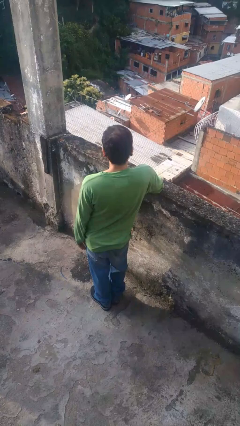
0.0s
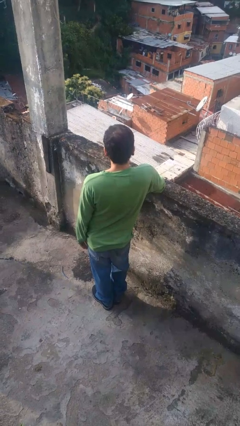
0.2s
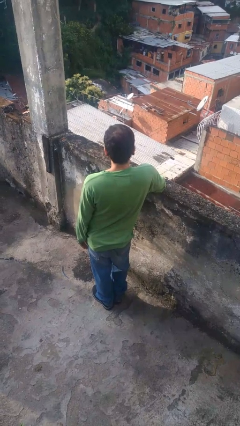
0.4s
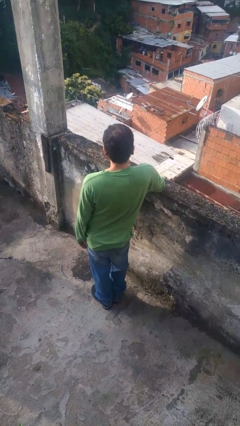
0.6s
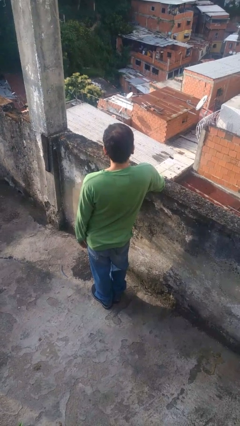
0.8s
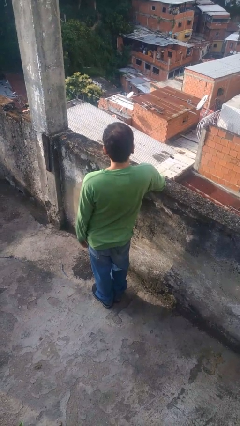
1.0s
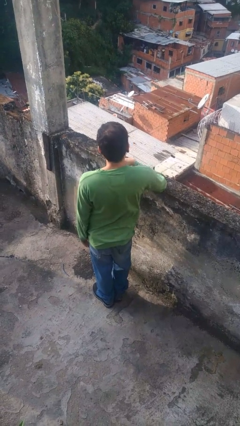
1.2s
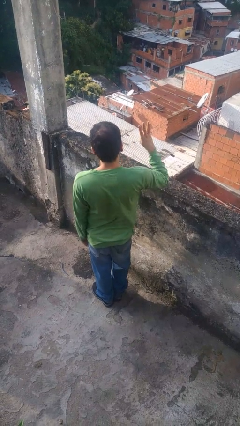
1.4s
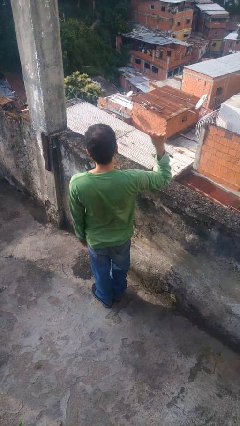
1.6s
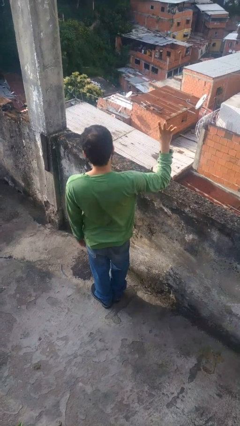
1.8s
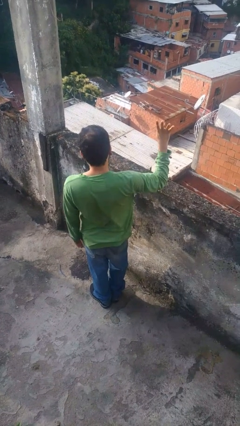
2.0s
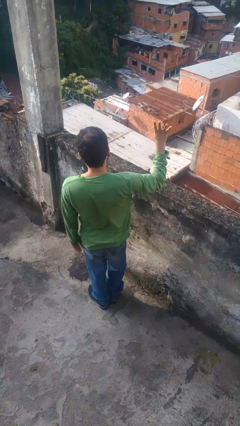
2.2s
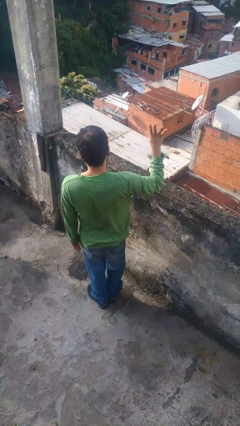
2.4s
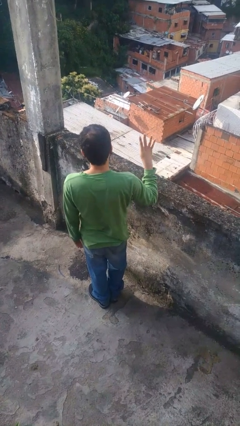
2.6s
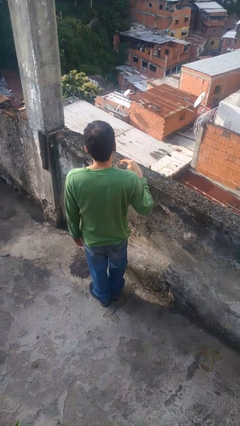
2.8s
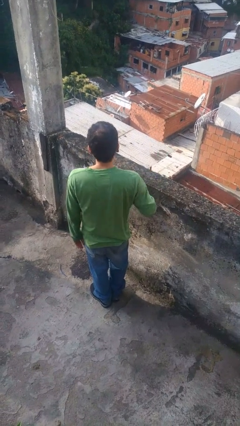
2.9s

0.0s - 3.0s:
person gestures number four

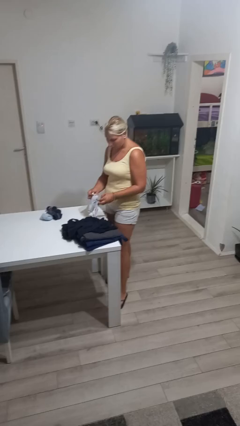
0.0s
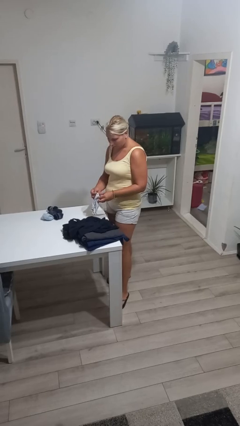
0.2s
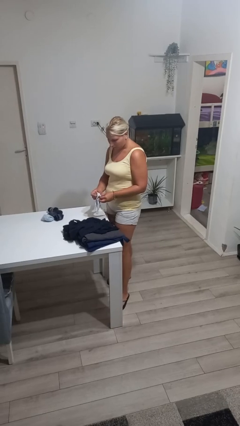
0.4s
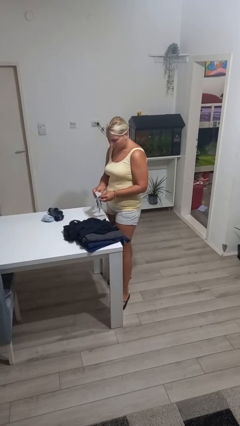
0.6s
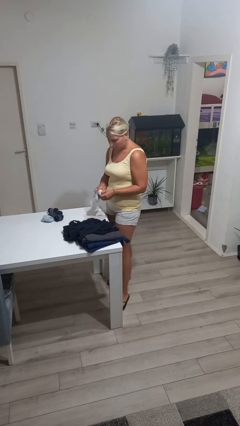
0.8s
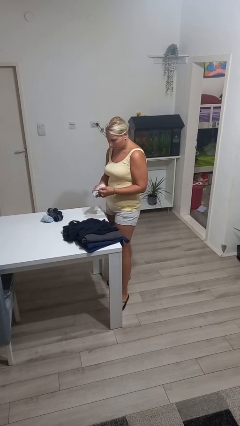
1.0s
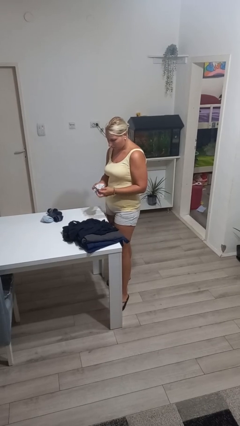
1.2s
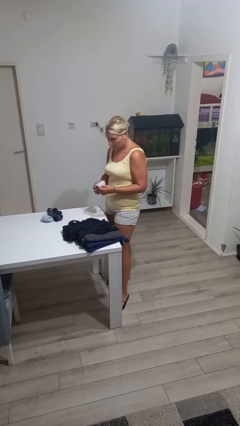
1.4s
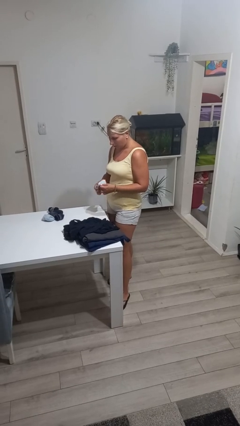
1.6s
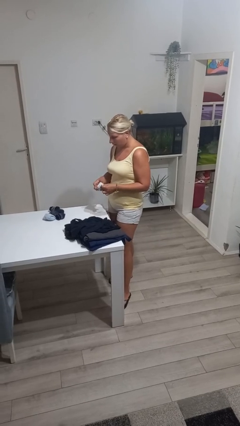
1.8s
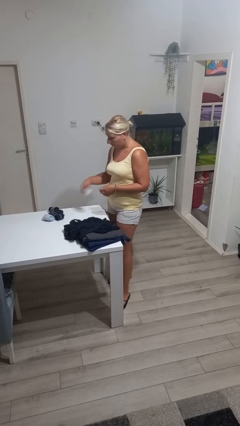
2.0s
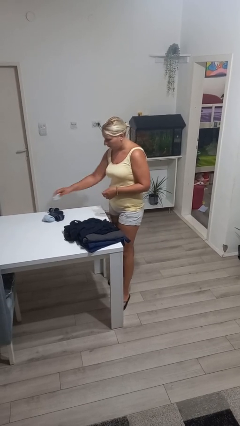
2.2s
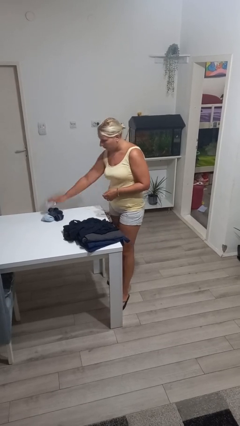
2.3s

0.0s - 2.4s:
person folds socks

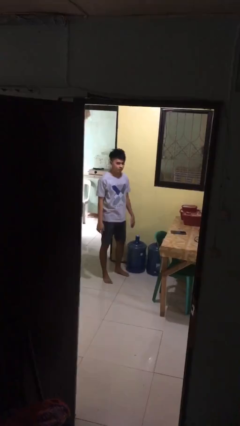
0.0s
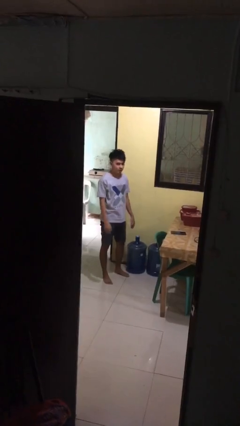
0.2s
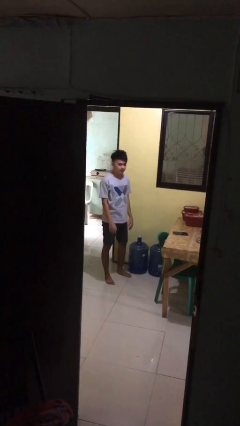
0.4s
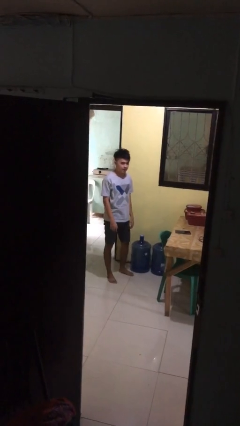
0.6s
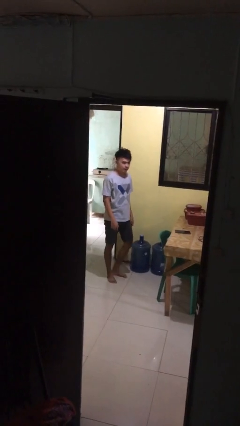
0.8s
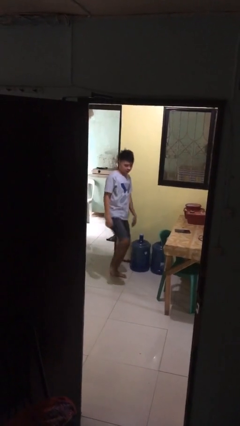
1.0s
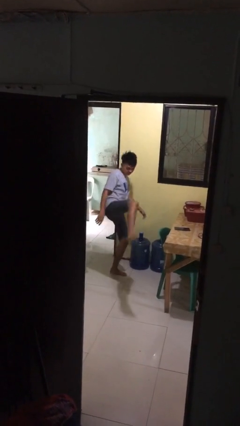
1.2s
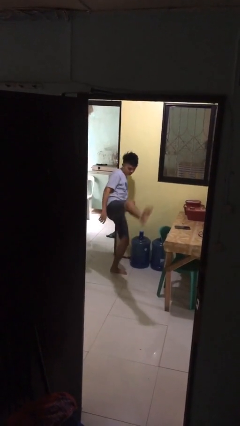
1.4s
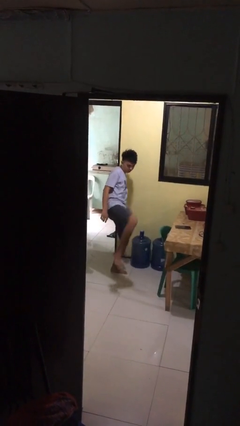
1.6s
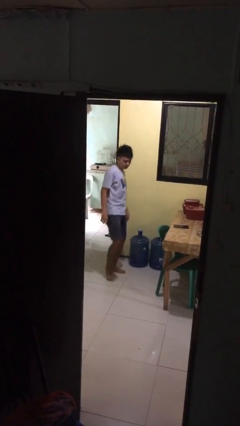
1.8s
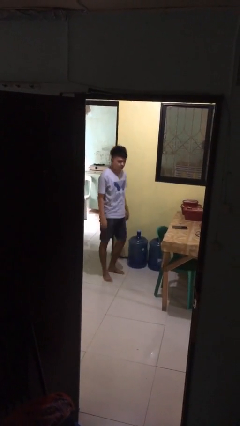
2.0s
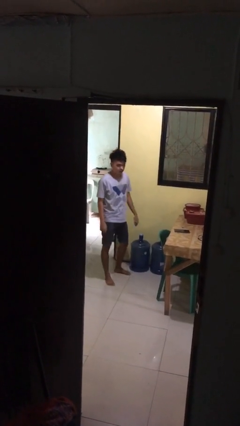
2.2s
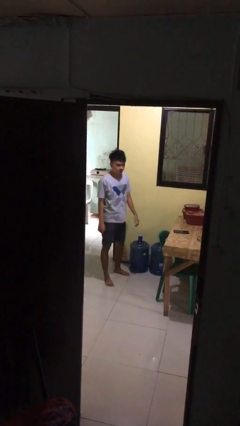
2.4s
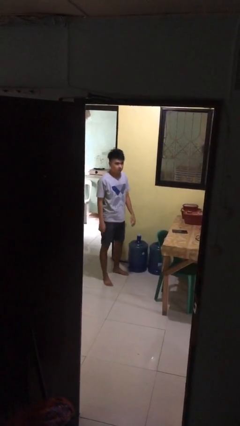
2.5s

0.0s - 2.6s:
person karate kicks

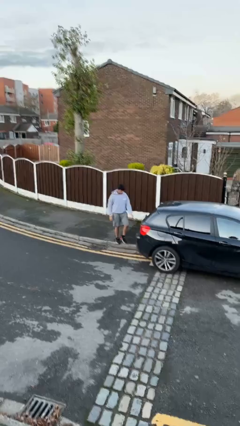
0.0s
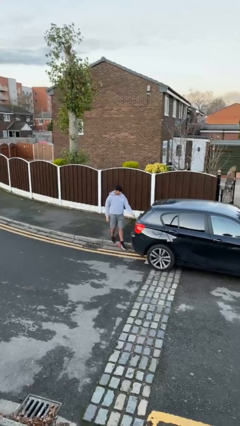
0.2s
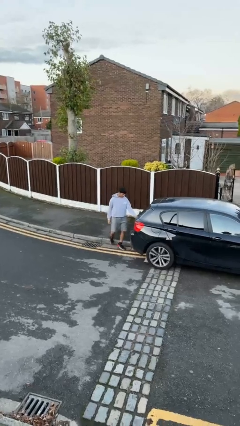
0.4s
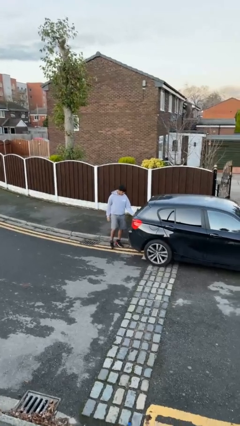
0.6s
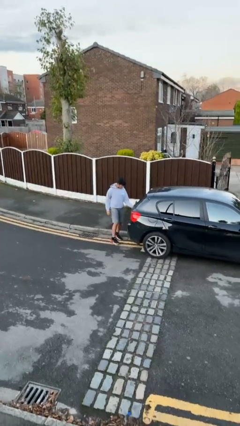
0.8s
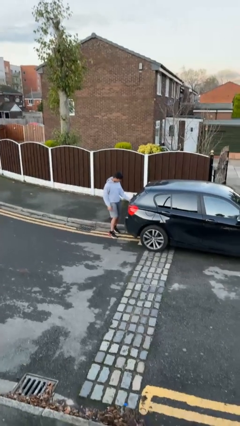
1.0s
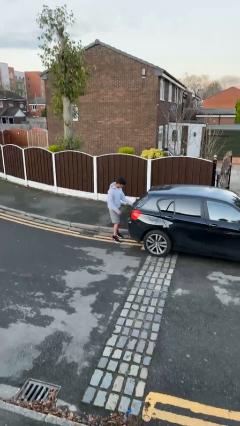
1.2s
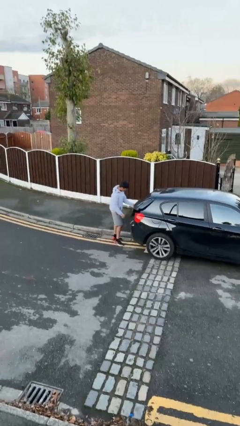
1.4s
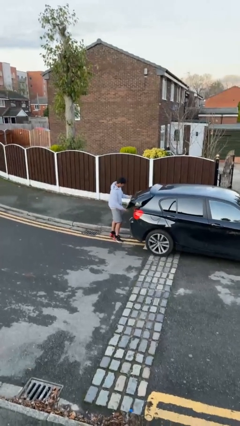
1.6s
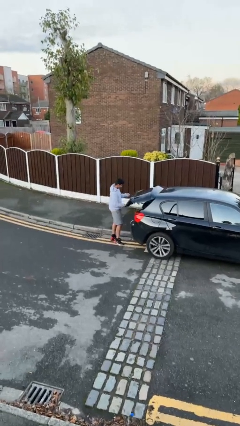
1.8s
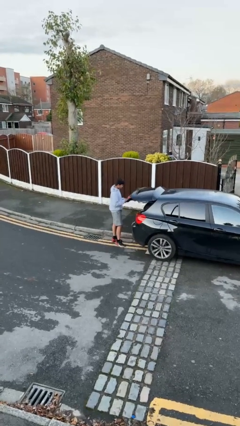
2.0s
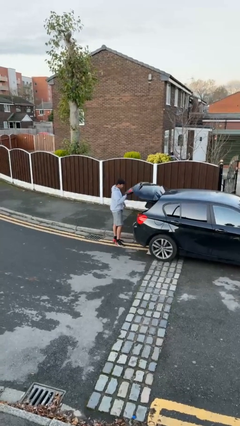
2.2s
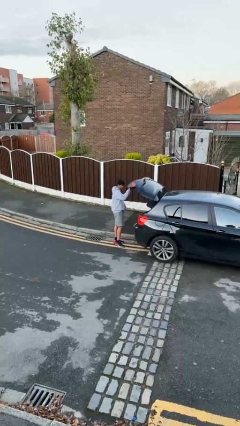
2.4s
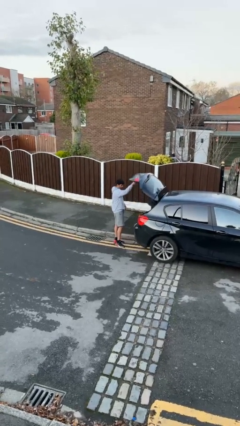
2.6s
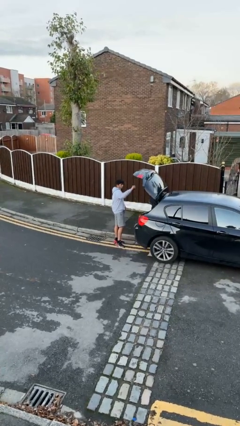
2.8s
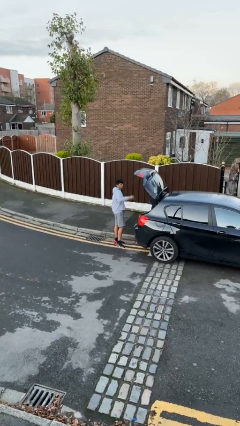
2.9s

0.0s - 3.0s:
person opens car trunk

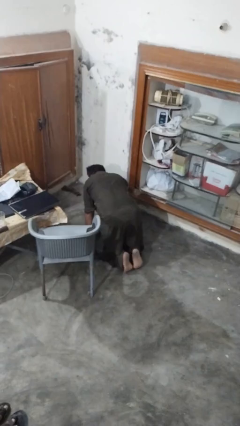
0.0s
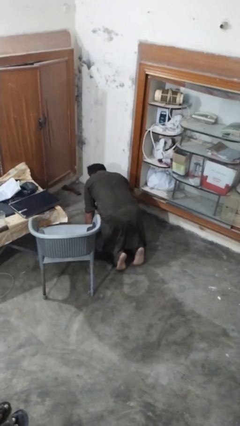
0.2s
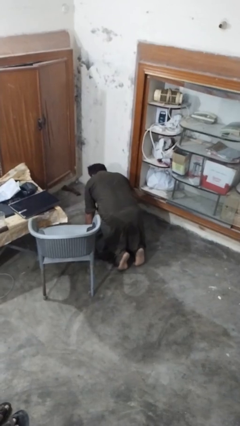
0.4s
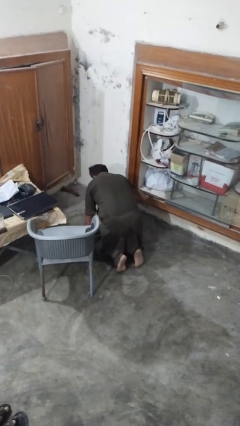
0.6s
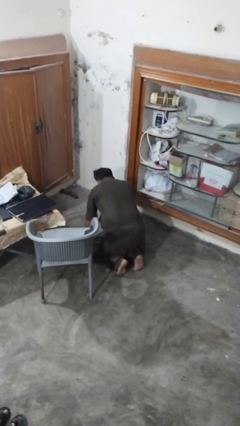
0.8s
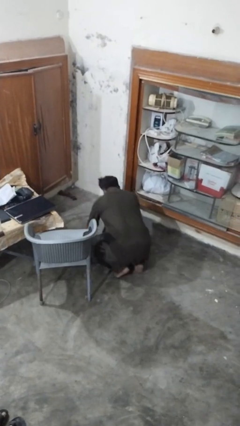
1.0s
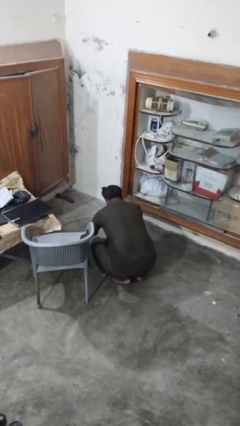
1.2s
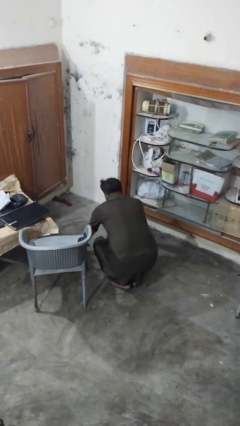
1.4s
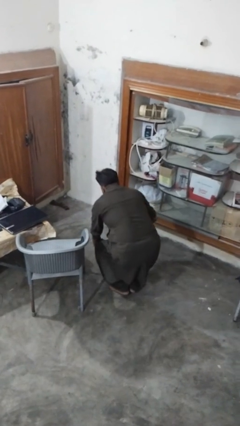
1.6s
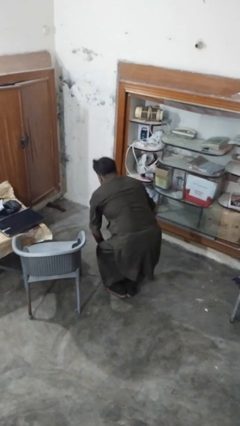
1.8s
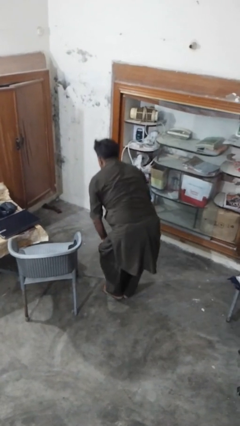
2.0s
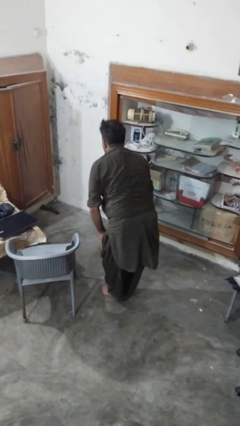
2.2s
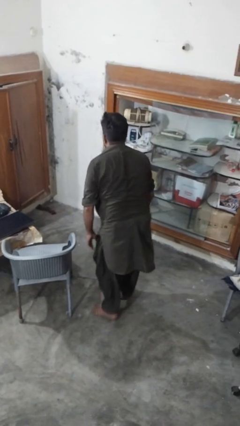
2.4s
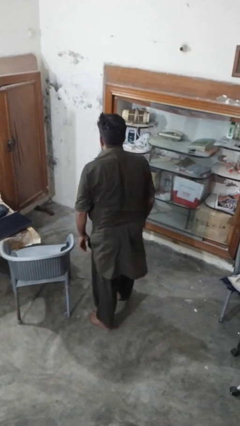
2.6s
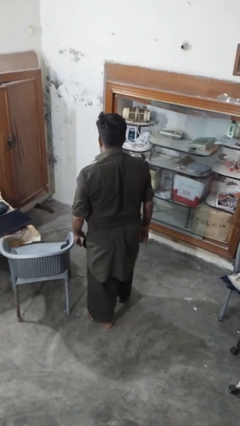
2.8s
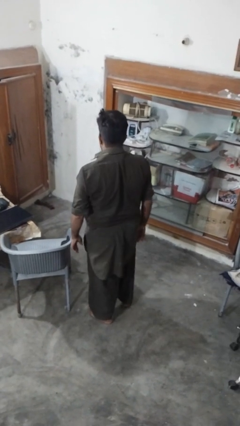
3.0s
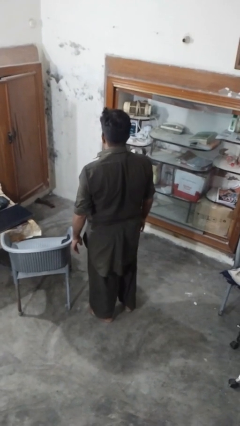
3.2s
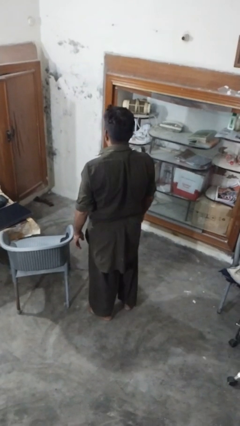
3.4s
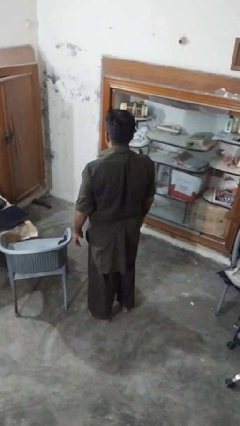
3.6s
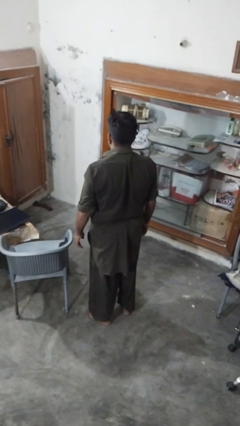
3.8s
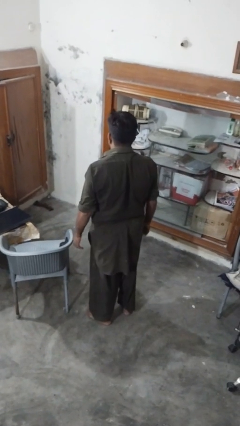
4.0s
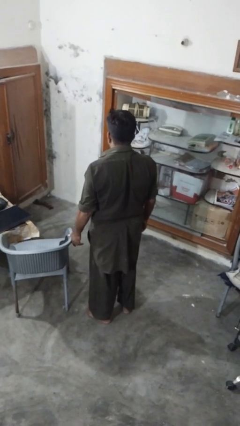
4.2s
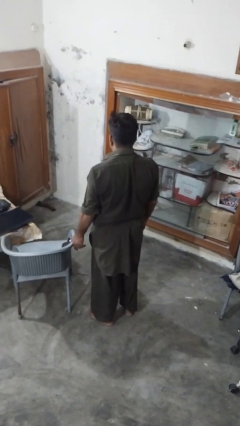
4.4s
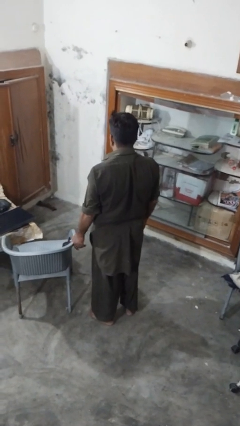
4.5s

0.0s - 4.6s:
person stands up from floor

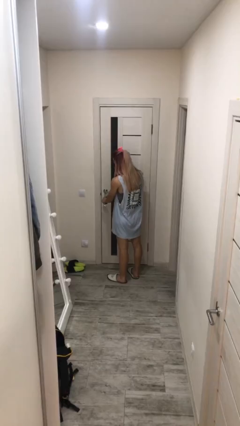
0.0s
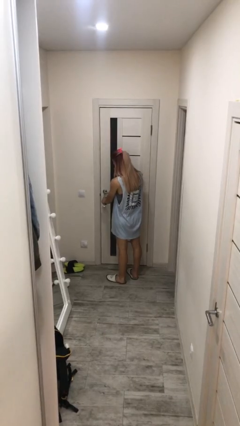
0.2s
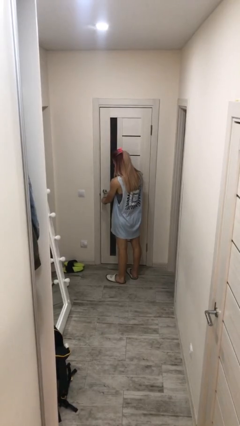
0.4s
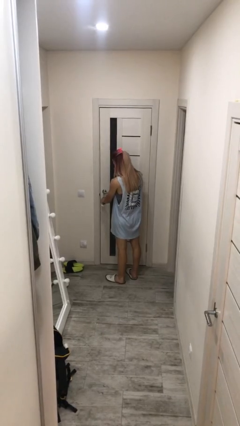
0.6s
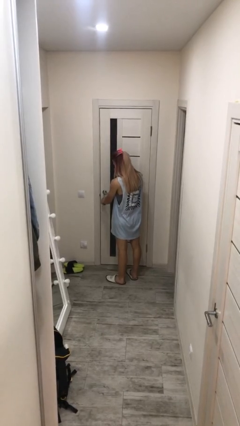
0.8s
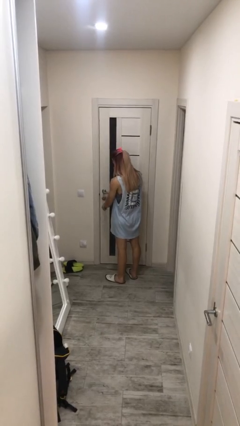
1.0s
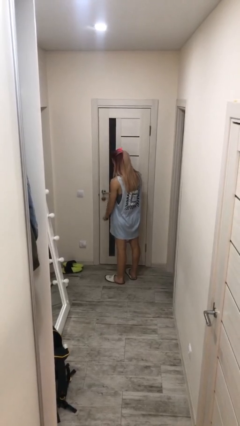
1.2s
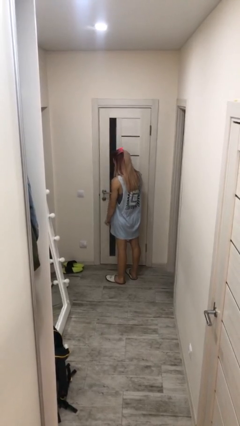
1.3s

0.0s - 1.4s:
person locks door with keys

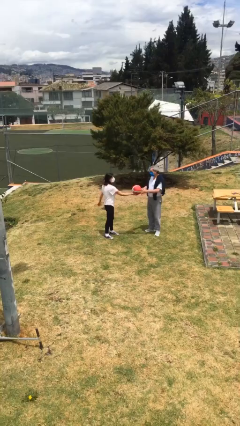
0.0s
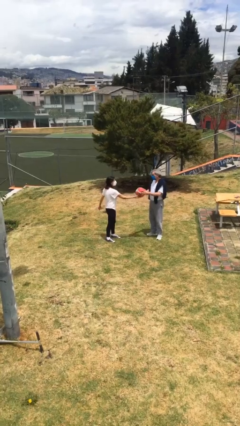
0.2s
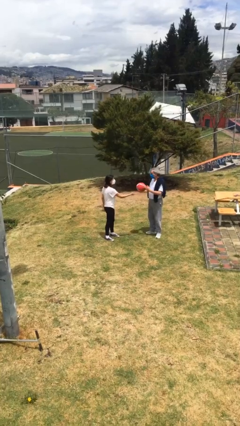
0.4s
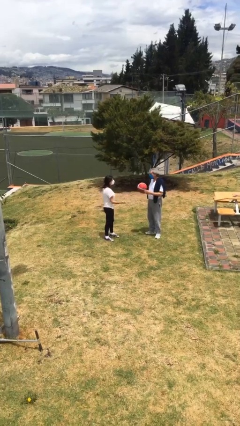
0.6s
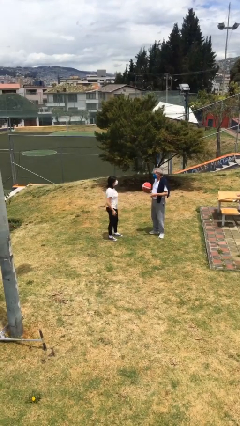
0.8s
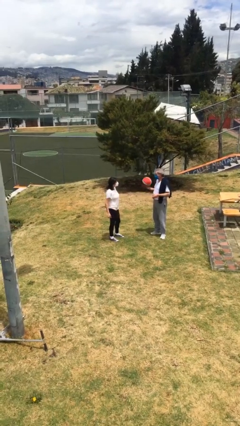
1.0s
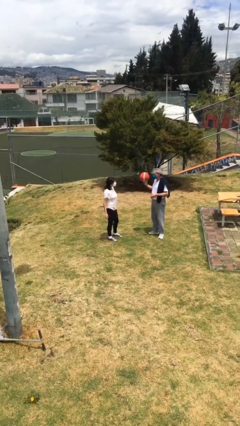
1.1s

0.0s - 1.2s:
person transfers object to person
